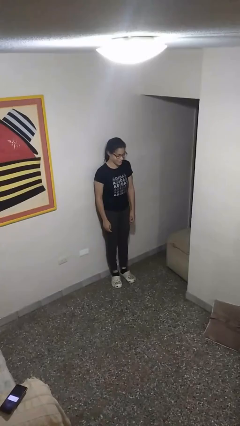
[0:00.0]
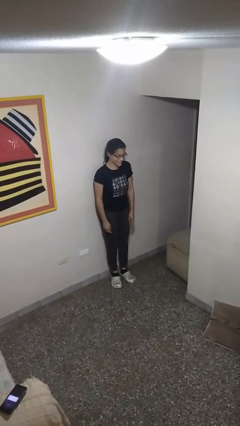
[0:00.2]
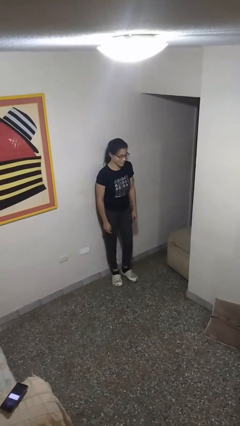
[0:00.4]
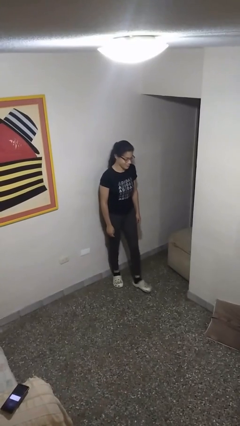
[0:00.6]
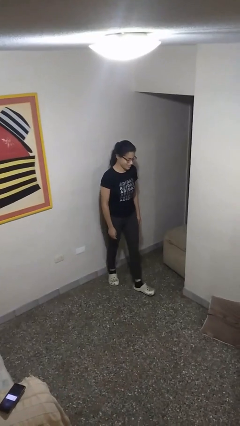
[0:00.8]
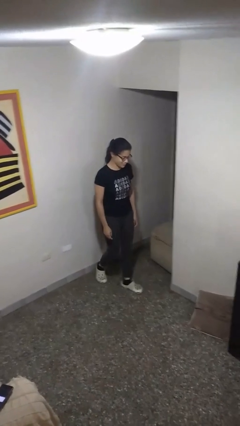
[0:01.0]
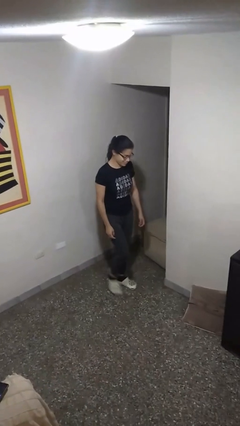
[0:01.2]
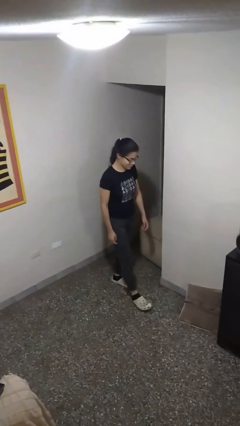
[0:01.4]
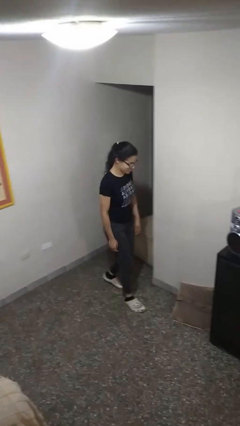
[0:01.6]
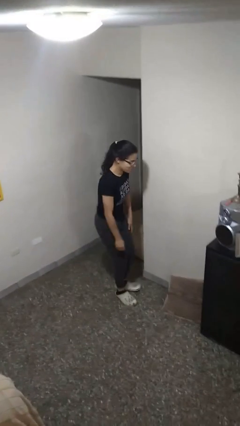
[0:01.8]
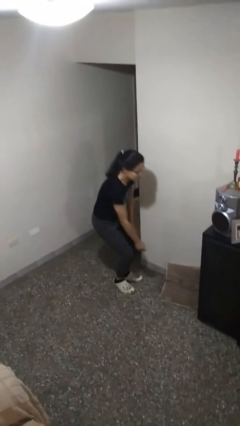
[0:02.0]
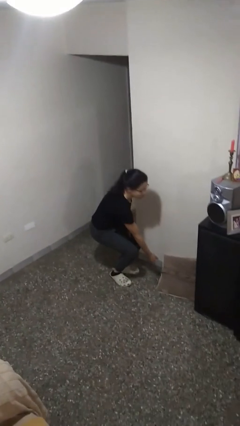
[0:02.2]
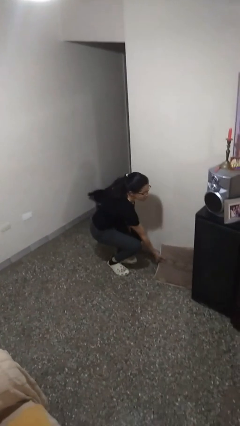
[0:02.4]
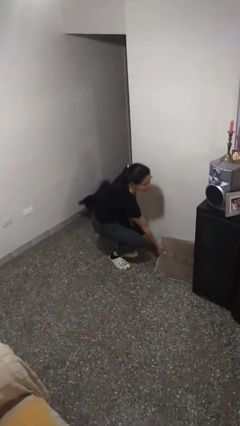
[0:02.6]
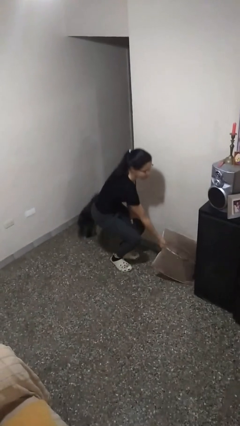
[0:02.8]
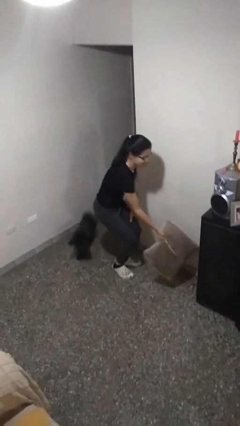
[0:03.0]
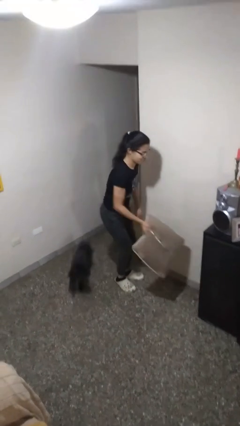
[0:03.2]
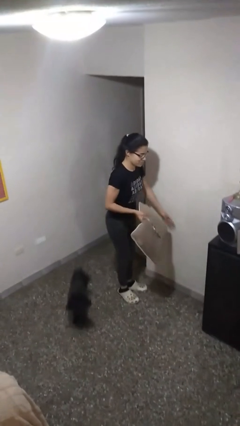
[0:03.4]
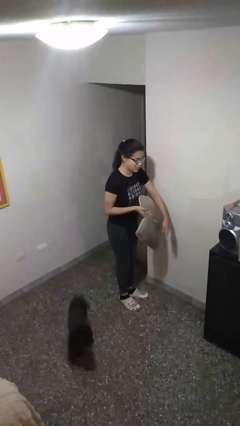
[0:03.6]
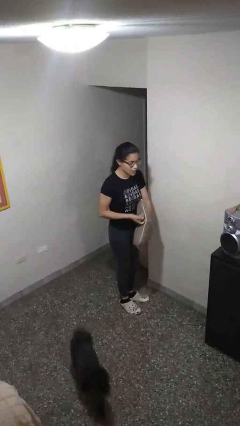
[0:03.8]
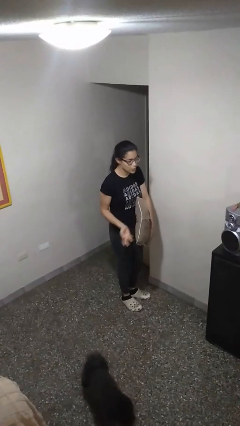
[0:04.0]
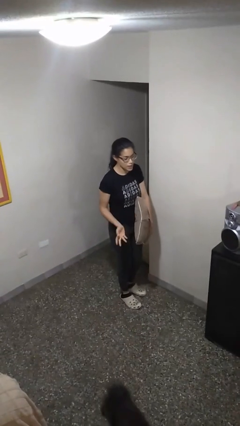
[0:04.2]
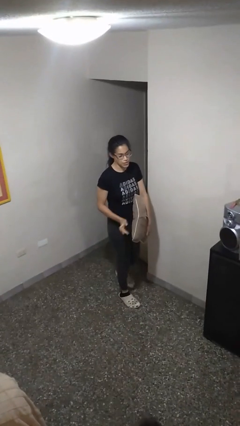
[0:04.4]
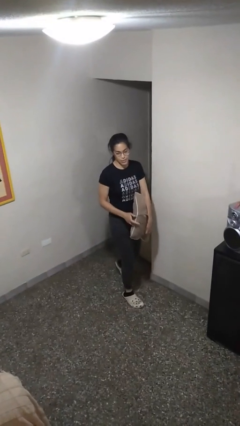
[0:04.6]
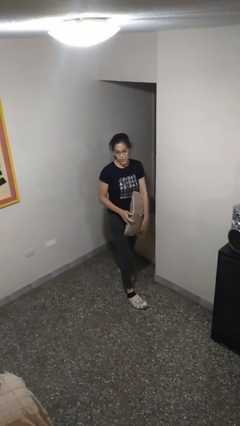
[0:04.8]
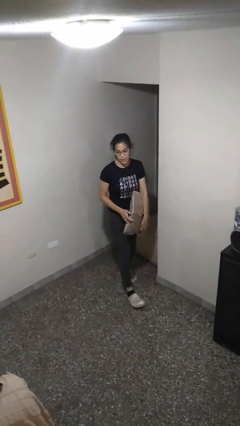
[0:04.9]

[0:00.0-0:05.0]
person picks up object from floor

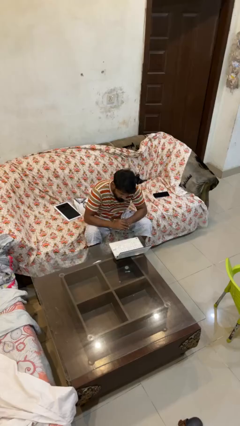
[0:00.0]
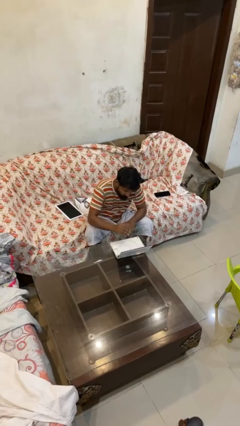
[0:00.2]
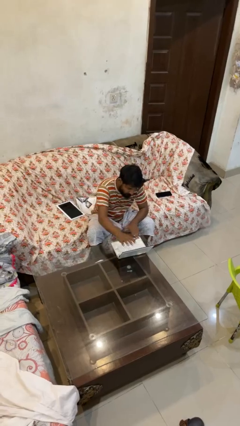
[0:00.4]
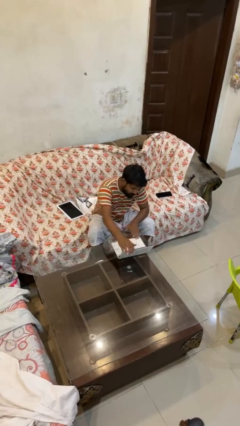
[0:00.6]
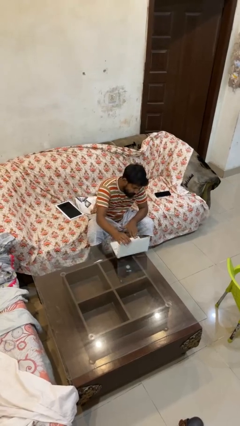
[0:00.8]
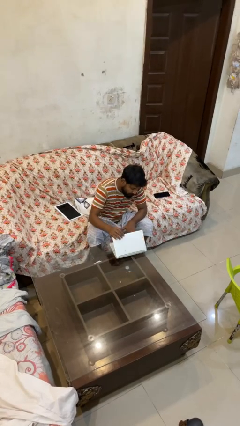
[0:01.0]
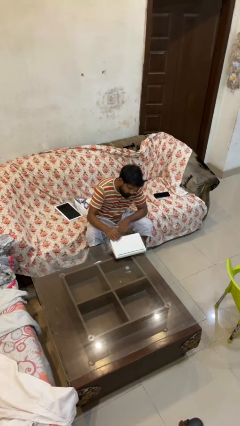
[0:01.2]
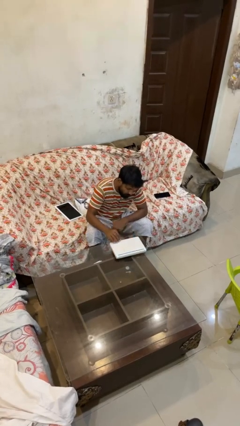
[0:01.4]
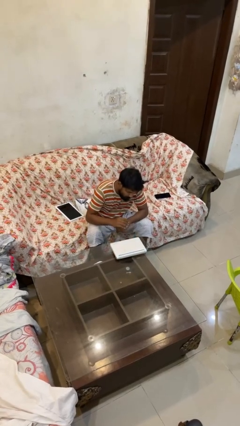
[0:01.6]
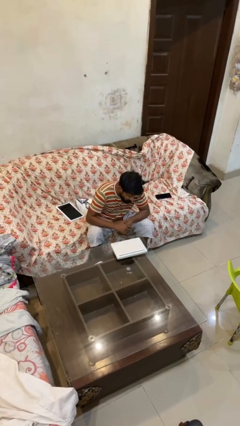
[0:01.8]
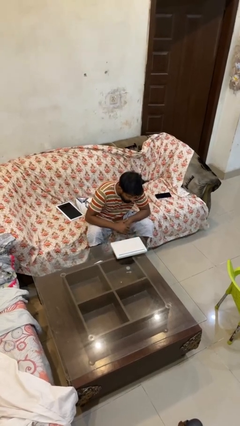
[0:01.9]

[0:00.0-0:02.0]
person closes laptop

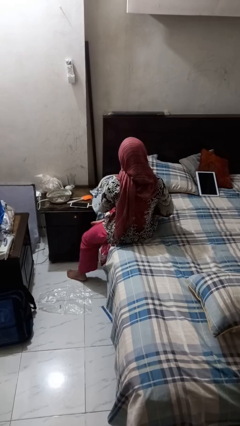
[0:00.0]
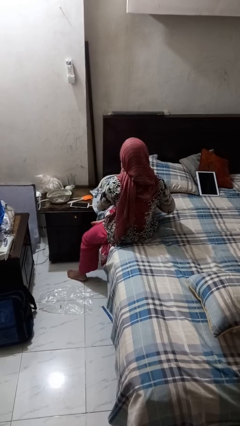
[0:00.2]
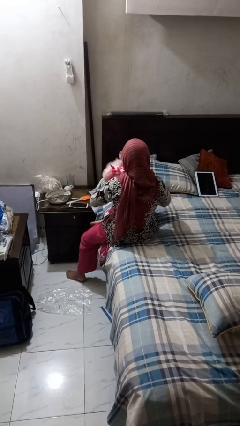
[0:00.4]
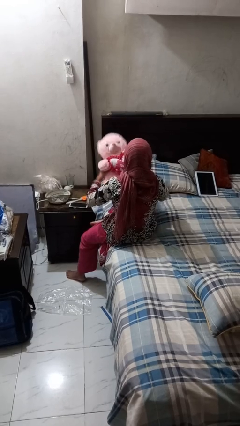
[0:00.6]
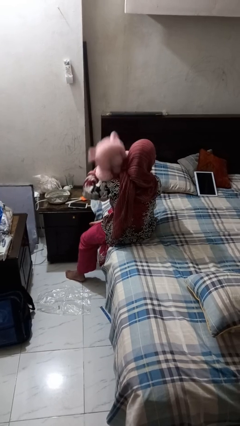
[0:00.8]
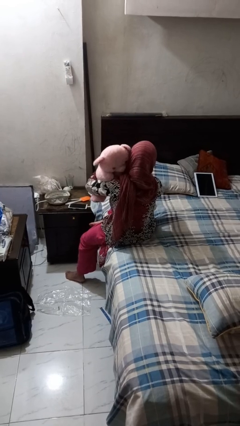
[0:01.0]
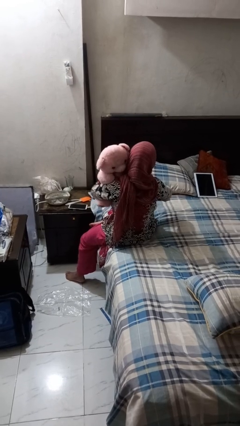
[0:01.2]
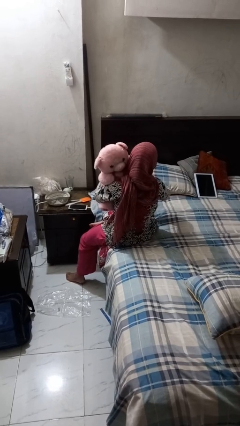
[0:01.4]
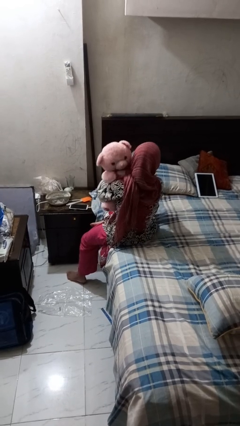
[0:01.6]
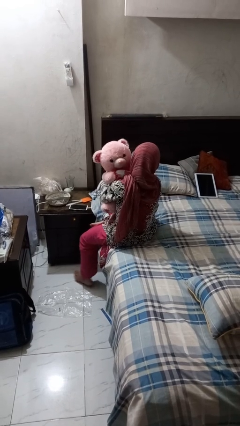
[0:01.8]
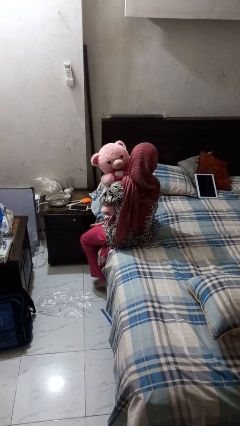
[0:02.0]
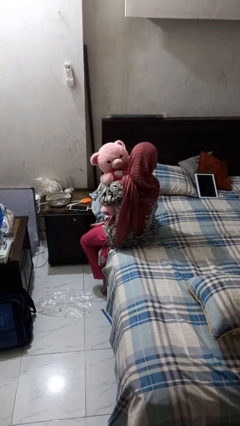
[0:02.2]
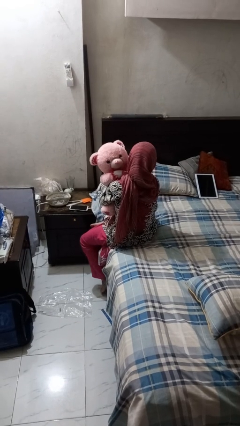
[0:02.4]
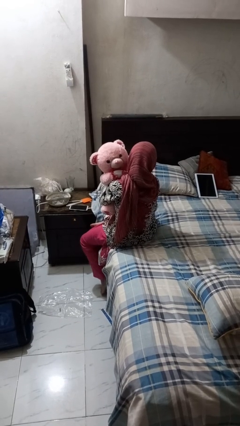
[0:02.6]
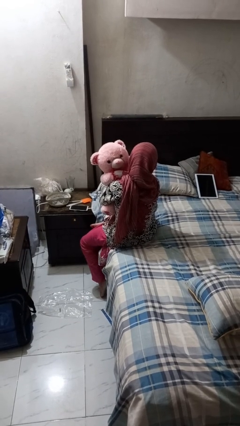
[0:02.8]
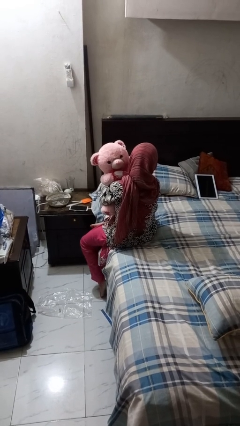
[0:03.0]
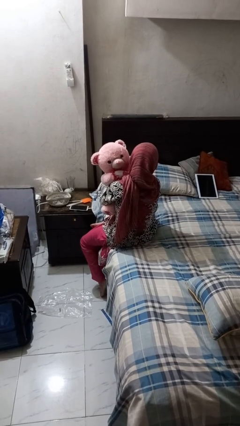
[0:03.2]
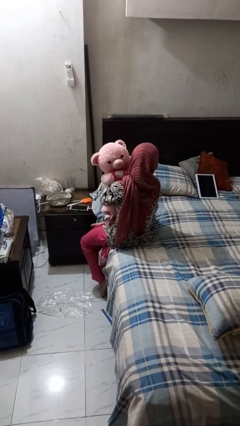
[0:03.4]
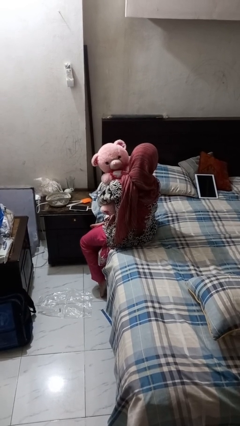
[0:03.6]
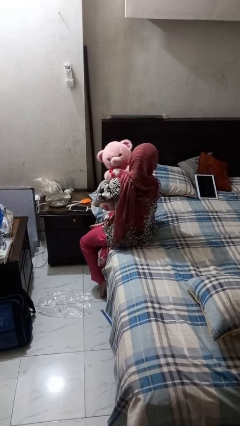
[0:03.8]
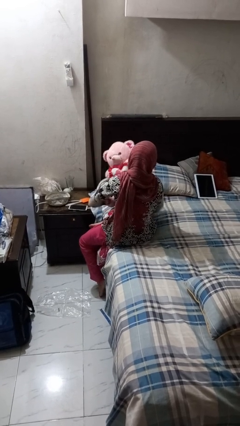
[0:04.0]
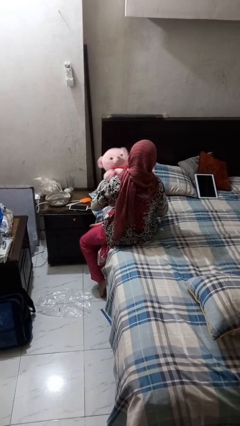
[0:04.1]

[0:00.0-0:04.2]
person hugs stuffed animal

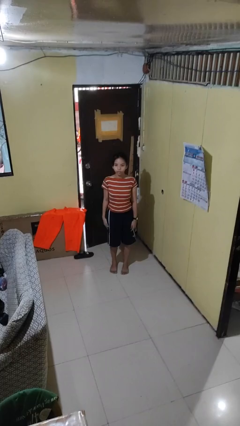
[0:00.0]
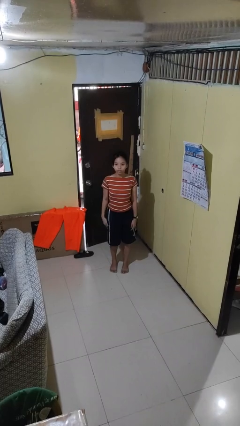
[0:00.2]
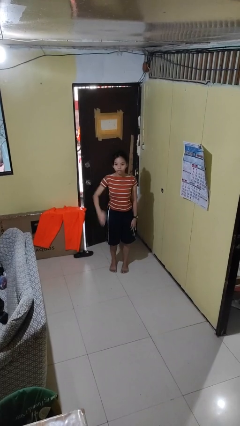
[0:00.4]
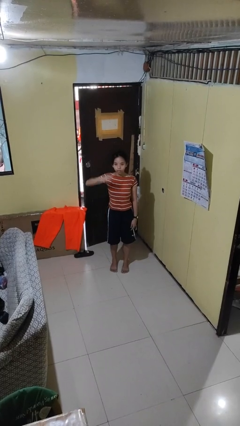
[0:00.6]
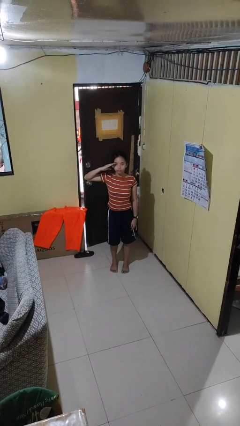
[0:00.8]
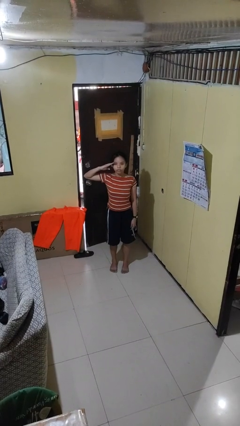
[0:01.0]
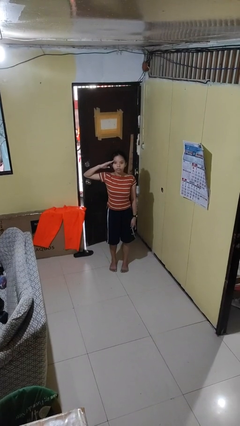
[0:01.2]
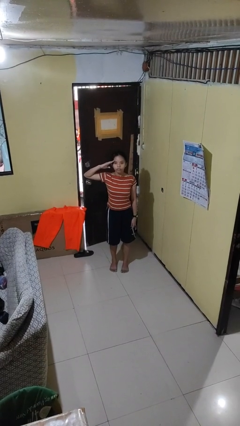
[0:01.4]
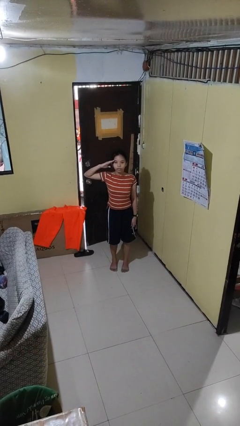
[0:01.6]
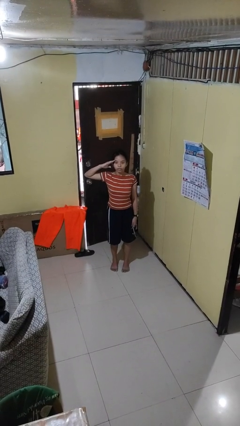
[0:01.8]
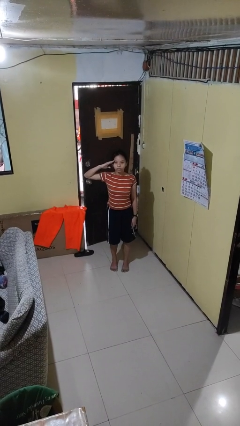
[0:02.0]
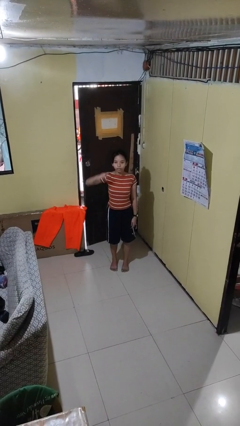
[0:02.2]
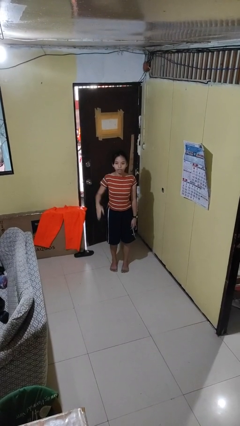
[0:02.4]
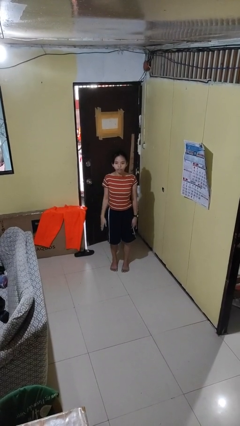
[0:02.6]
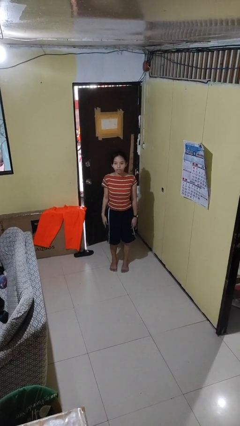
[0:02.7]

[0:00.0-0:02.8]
person salutes

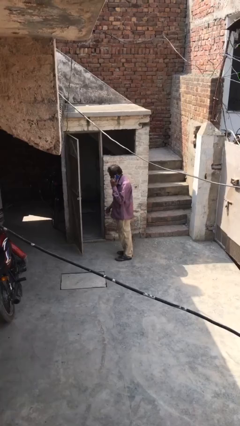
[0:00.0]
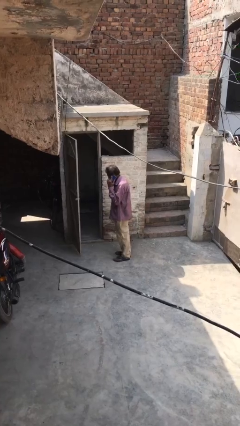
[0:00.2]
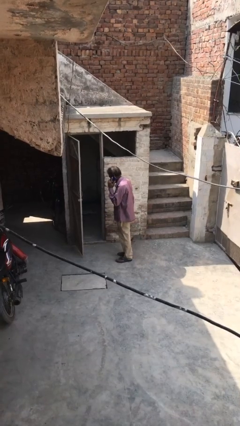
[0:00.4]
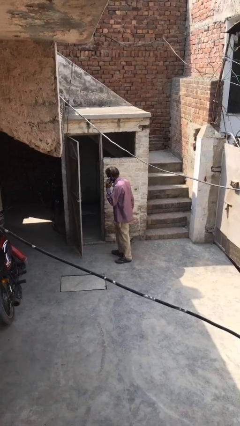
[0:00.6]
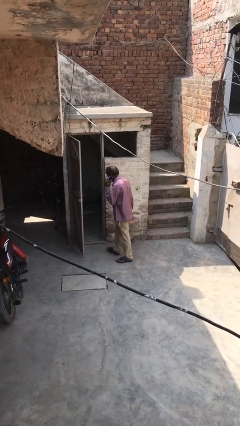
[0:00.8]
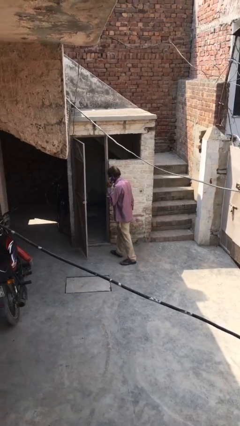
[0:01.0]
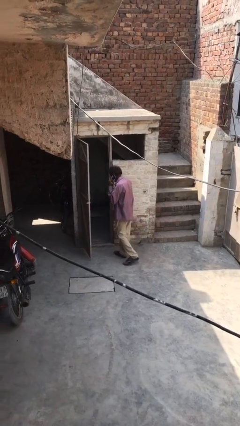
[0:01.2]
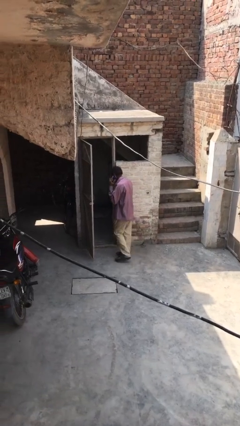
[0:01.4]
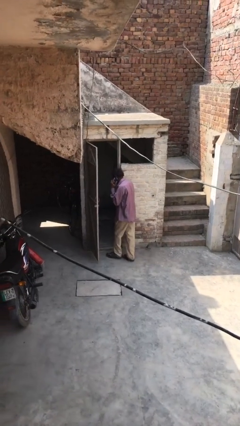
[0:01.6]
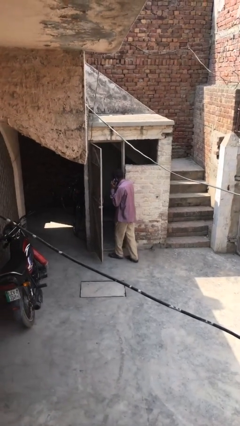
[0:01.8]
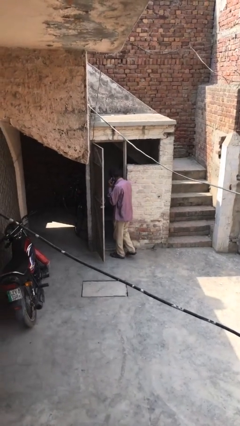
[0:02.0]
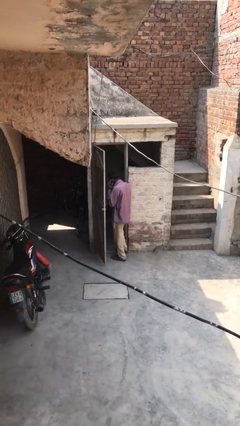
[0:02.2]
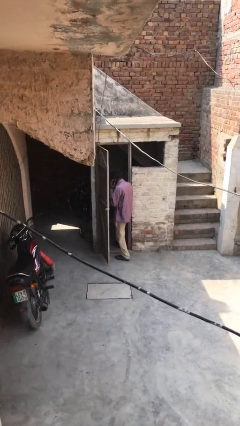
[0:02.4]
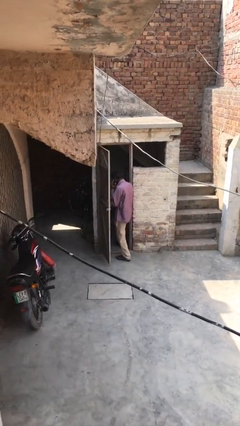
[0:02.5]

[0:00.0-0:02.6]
person exits scene through structure

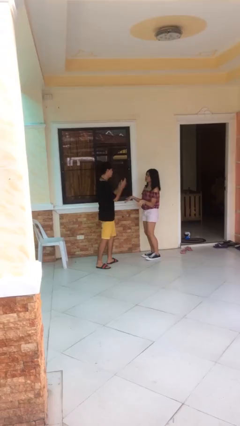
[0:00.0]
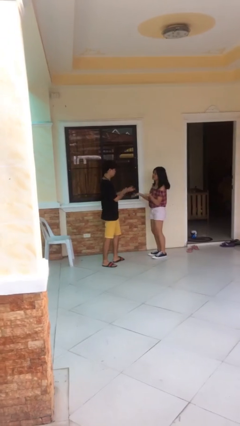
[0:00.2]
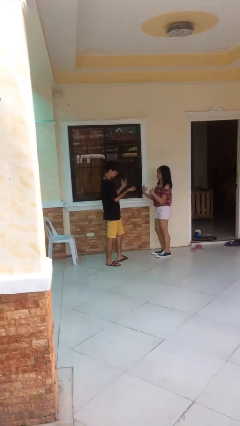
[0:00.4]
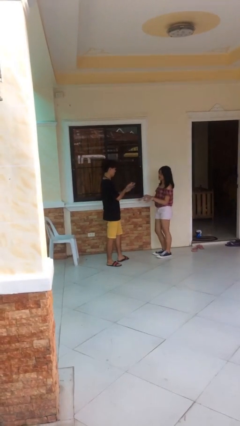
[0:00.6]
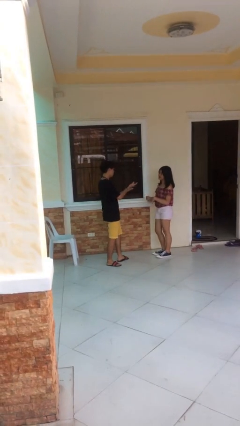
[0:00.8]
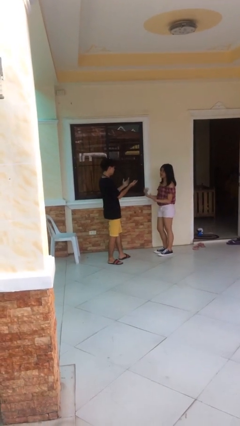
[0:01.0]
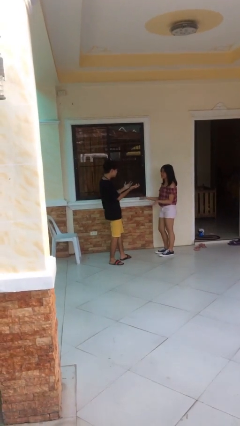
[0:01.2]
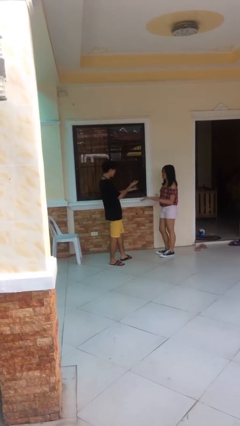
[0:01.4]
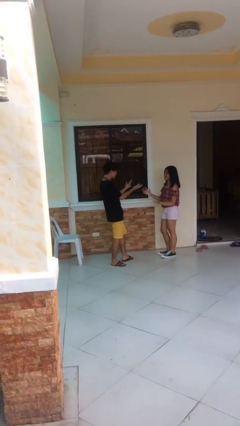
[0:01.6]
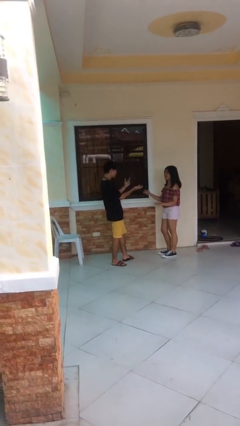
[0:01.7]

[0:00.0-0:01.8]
person talks to person
